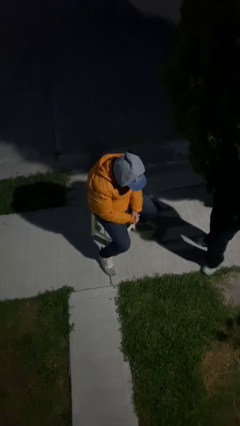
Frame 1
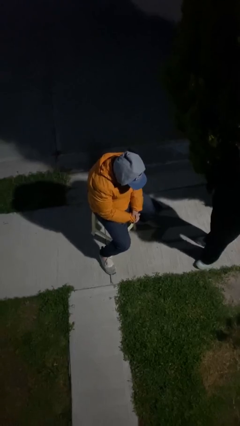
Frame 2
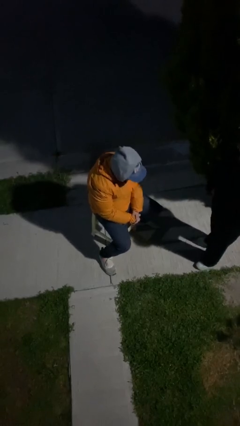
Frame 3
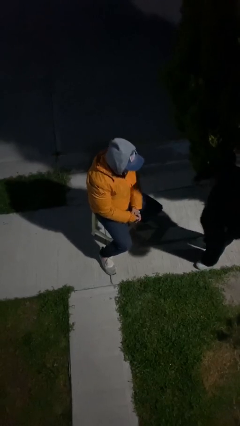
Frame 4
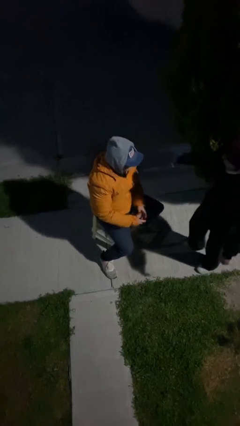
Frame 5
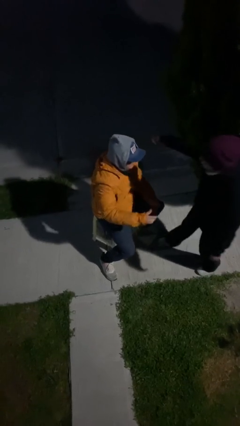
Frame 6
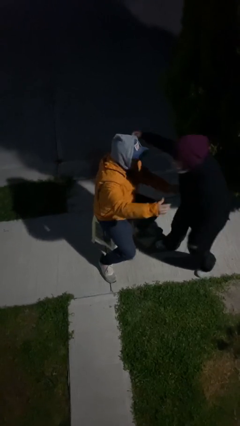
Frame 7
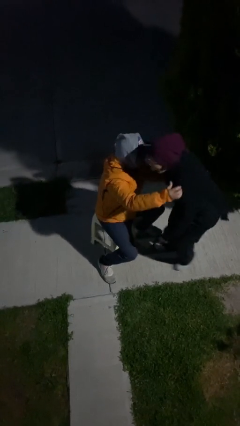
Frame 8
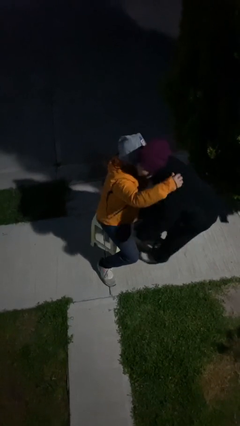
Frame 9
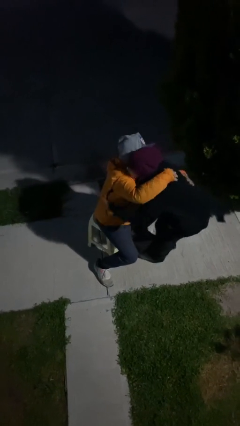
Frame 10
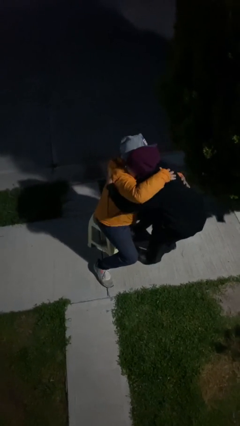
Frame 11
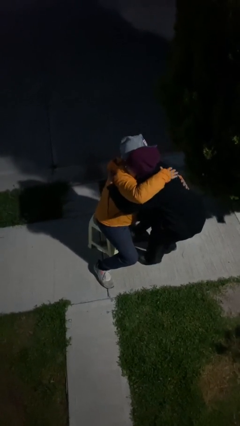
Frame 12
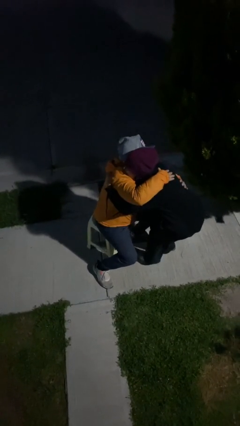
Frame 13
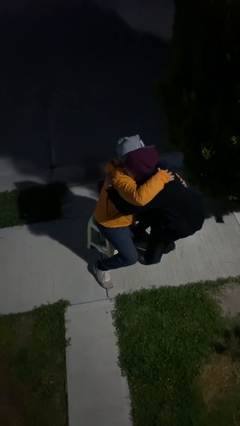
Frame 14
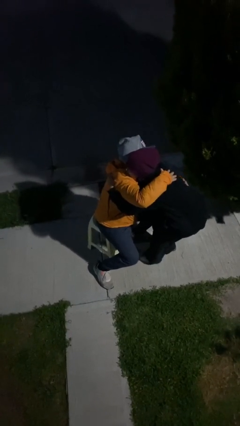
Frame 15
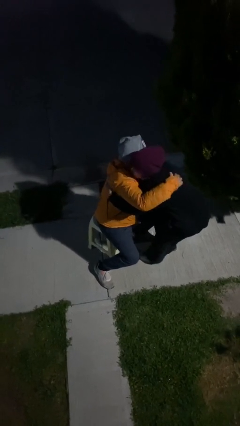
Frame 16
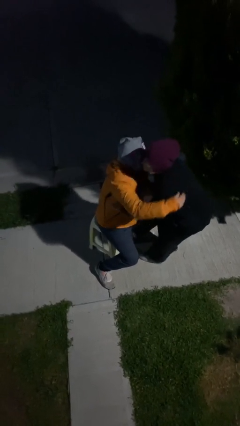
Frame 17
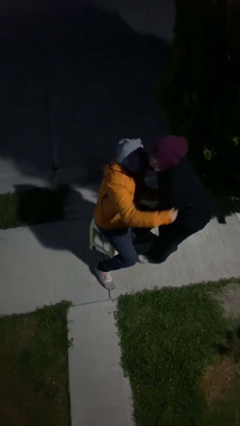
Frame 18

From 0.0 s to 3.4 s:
person embraces person

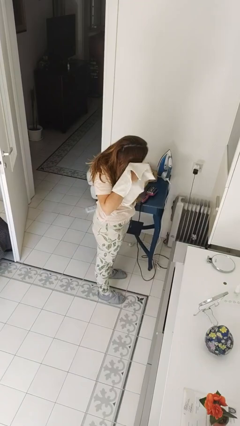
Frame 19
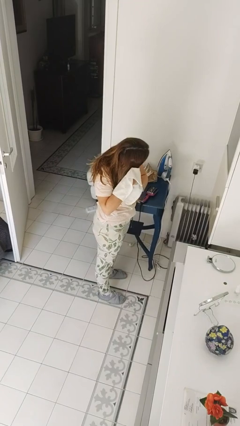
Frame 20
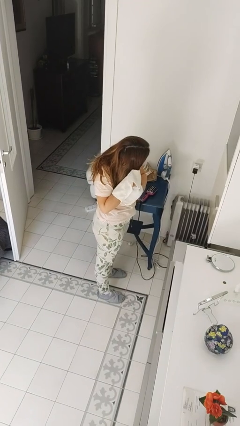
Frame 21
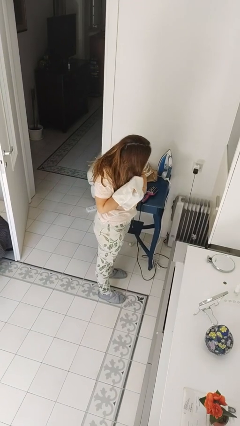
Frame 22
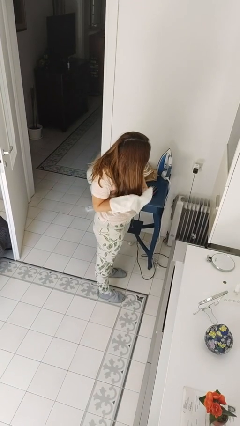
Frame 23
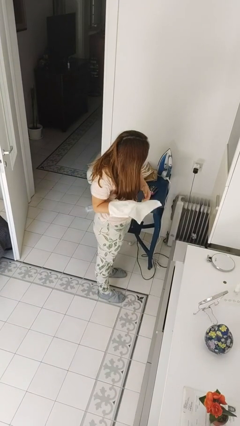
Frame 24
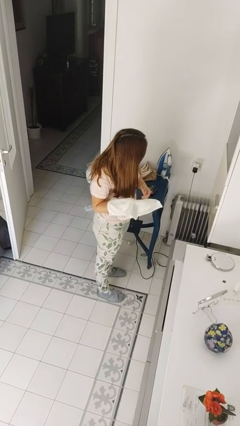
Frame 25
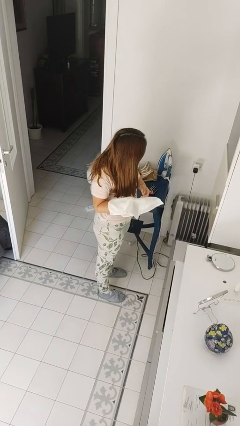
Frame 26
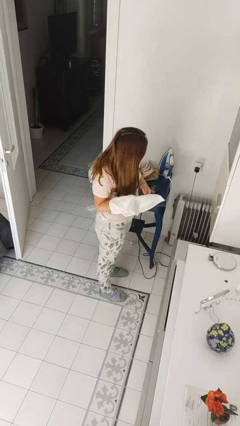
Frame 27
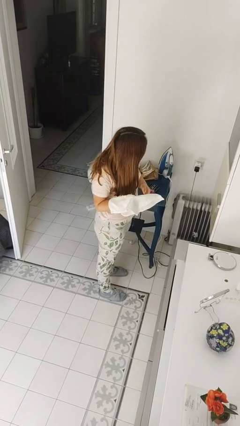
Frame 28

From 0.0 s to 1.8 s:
person dries hair with towel

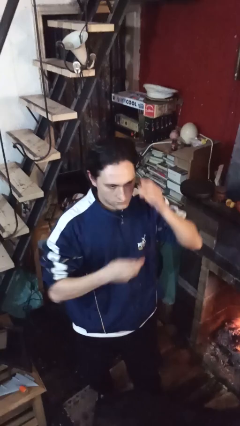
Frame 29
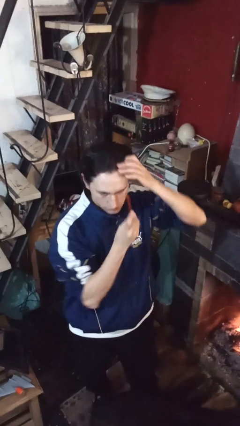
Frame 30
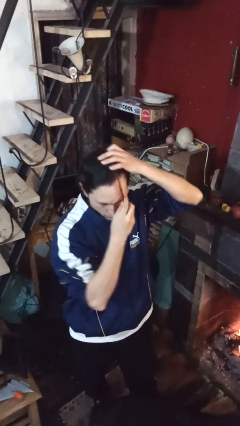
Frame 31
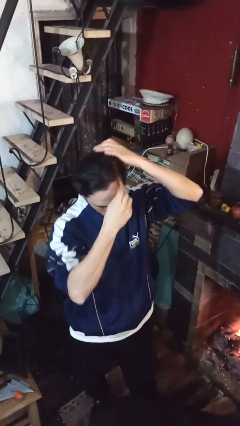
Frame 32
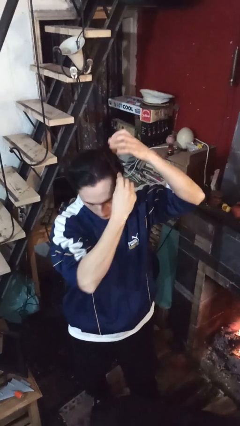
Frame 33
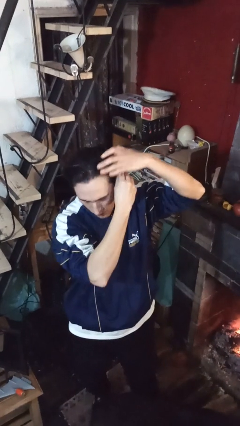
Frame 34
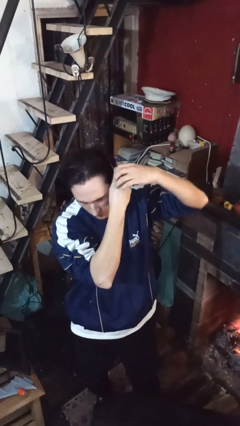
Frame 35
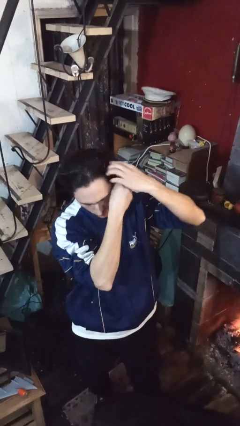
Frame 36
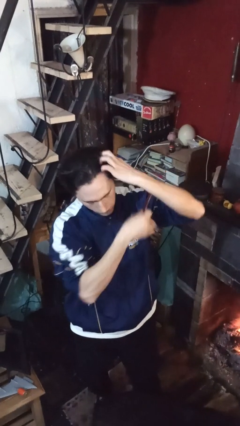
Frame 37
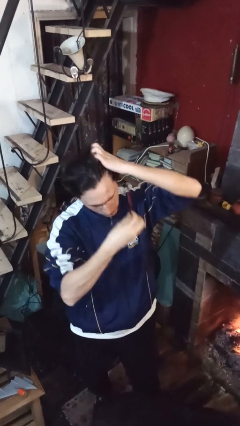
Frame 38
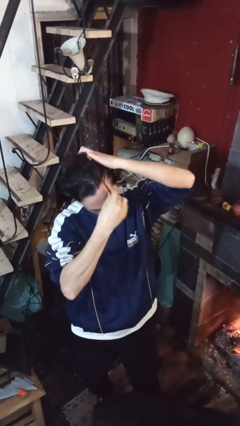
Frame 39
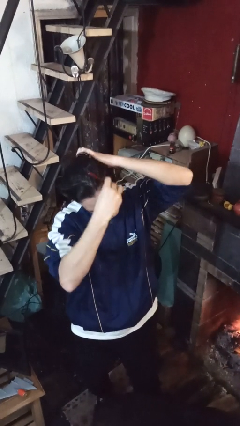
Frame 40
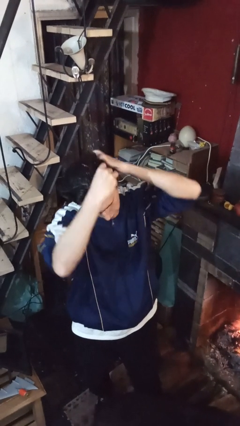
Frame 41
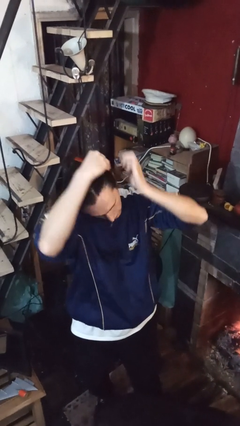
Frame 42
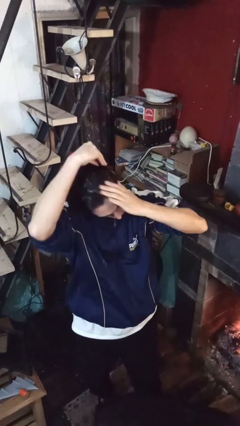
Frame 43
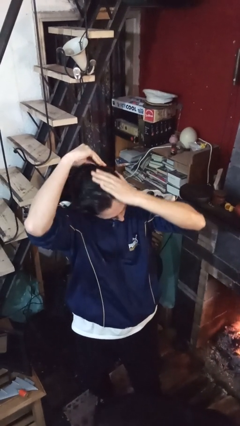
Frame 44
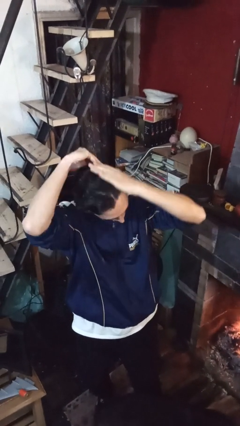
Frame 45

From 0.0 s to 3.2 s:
person brushes hair

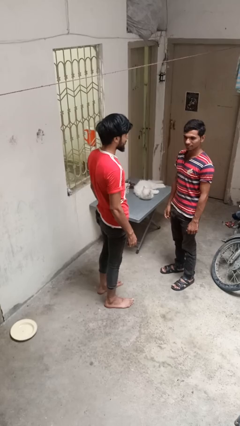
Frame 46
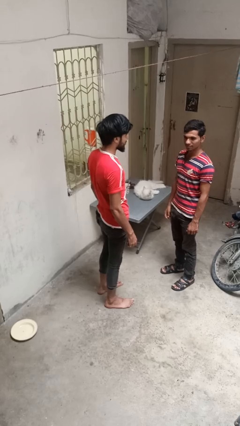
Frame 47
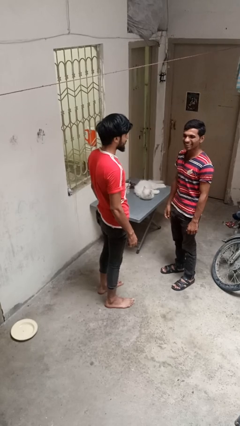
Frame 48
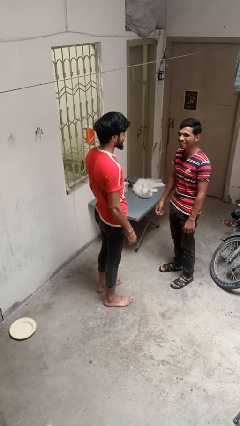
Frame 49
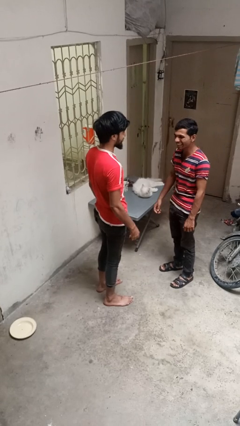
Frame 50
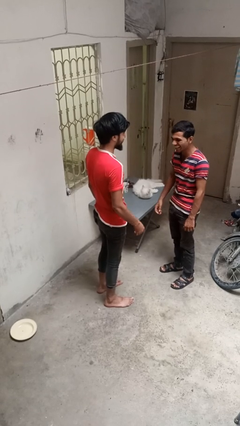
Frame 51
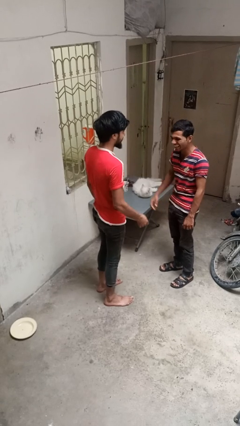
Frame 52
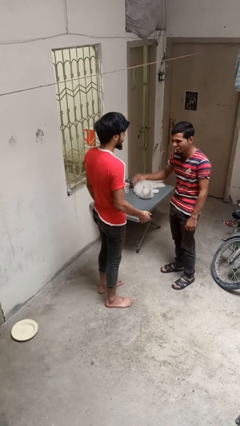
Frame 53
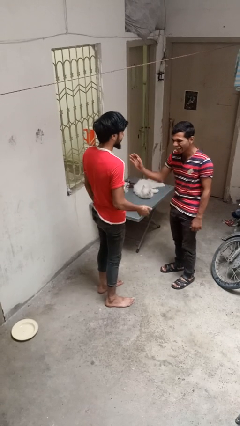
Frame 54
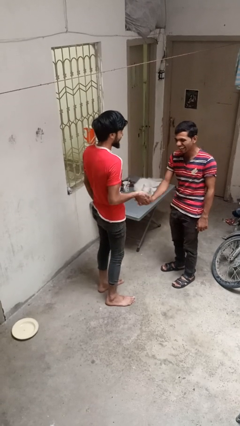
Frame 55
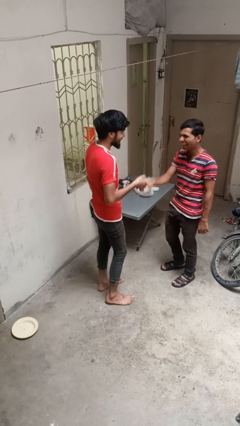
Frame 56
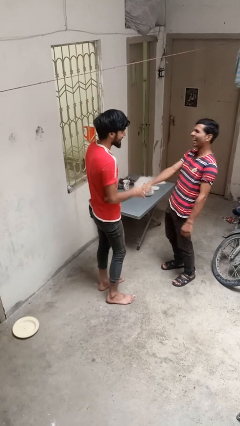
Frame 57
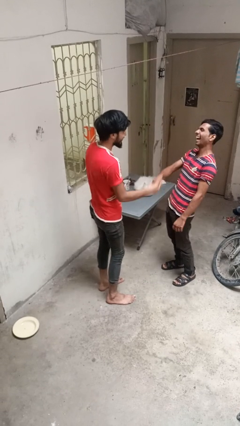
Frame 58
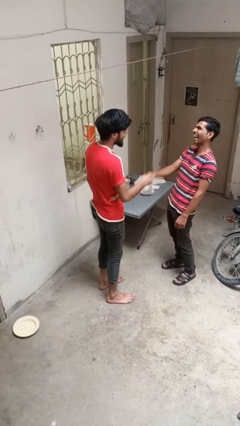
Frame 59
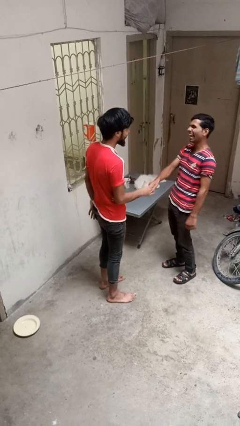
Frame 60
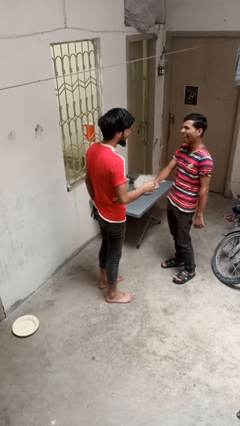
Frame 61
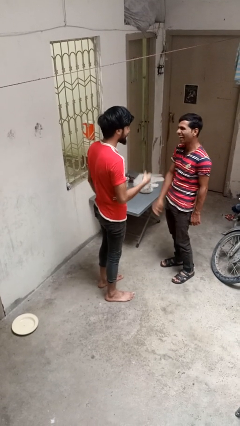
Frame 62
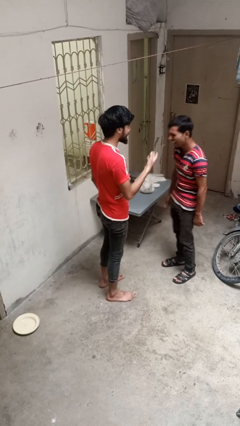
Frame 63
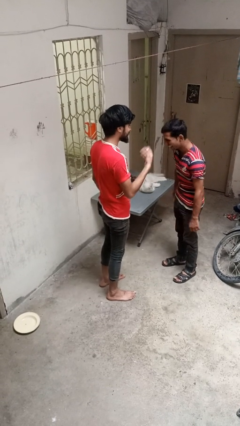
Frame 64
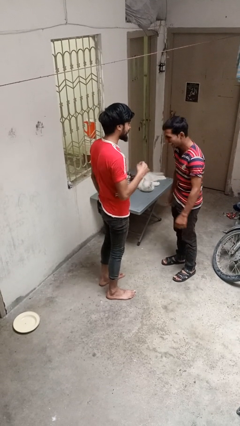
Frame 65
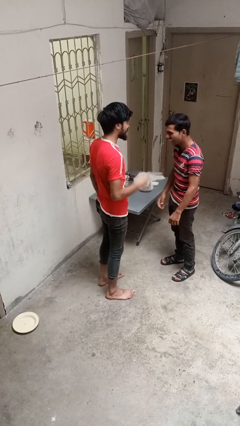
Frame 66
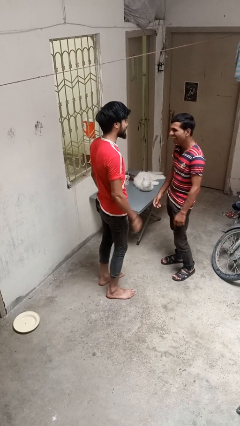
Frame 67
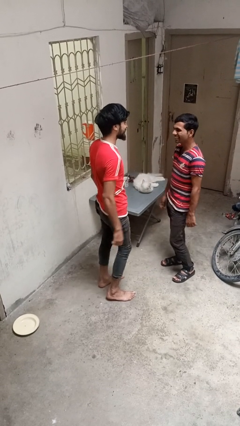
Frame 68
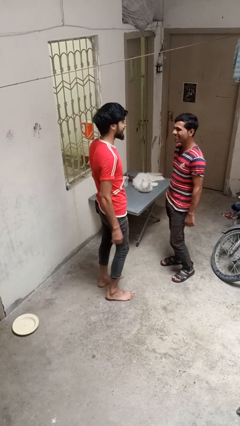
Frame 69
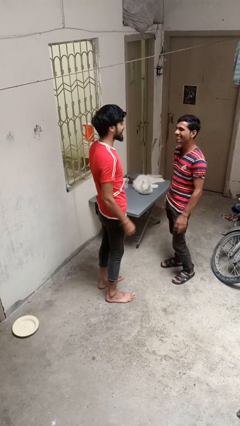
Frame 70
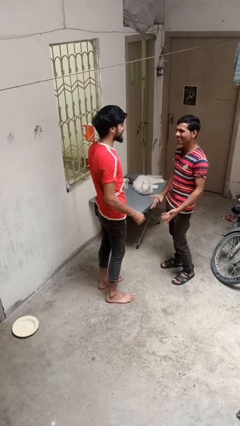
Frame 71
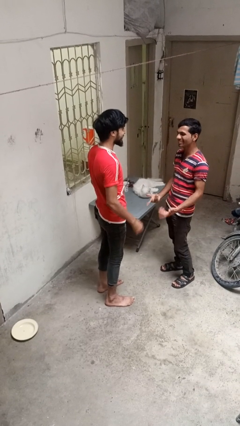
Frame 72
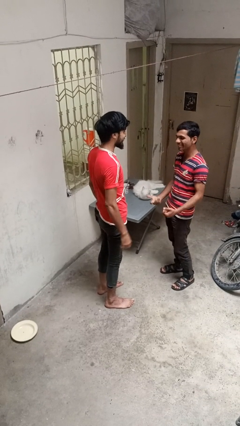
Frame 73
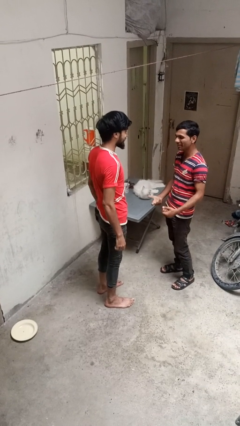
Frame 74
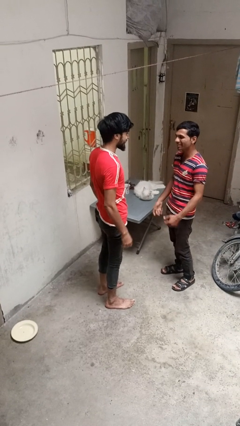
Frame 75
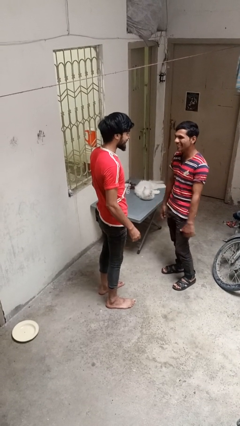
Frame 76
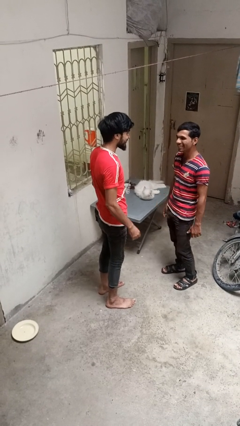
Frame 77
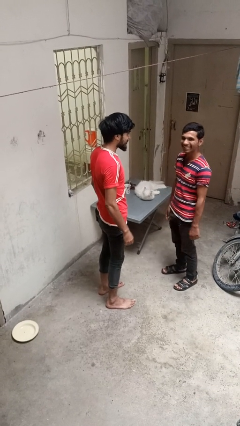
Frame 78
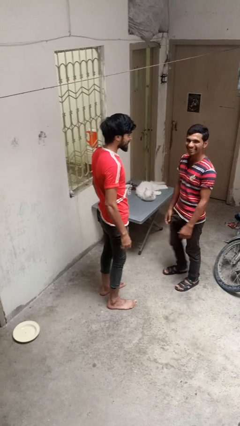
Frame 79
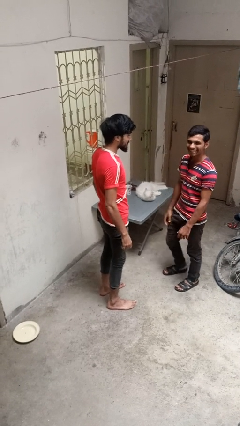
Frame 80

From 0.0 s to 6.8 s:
person laughs with person

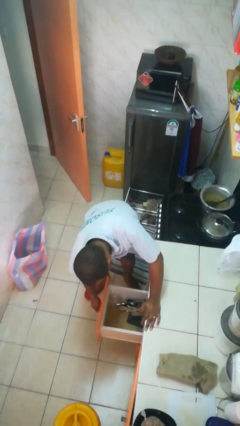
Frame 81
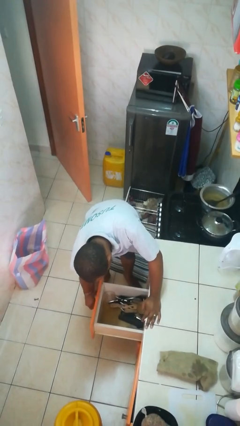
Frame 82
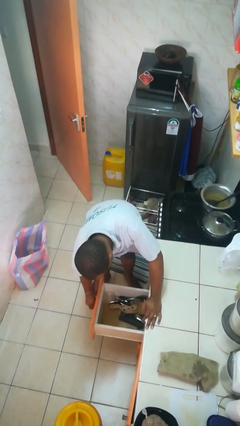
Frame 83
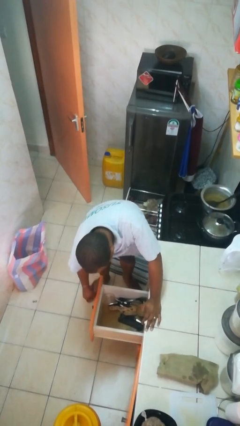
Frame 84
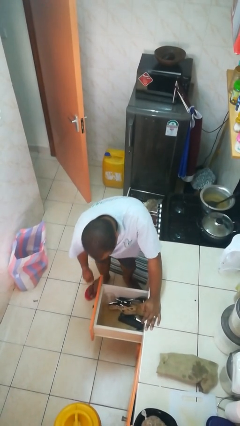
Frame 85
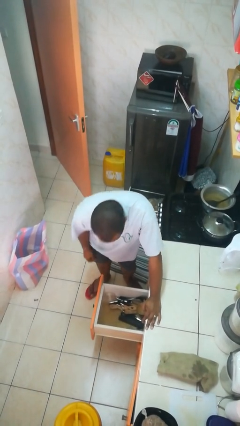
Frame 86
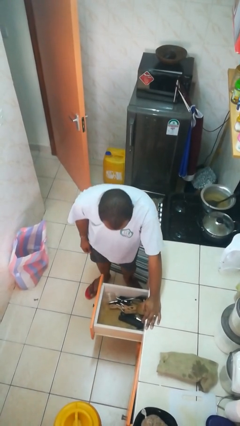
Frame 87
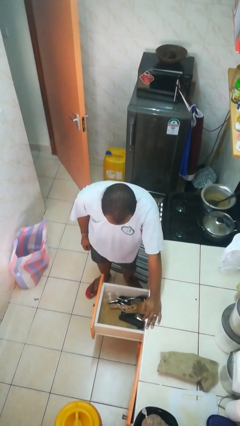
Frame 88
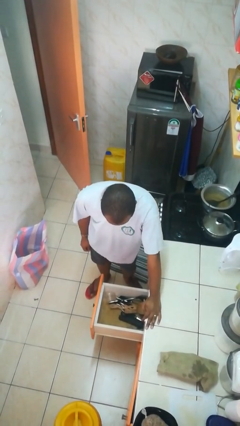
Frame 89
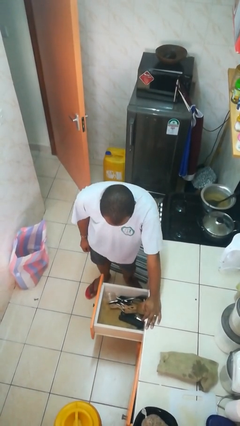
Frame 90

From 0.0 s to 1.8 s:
person opens kitchen drawer

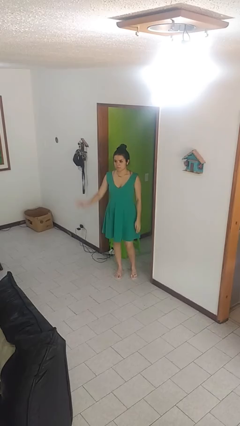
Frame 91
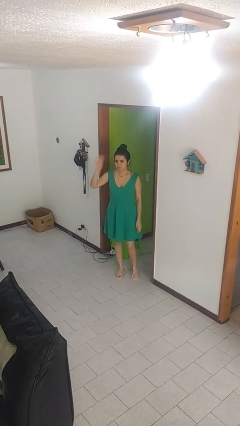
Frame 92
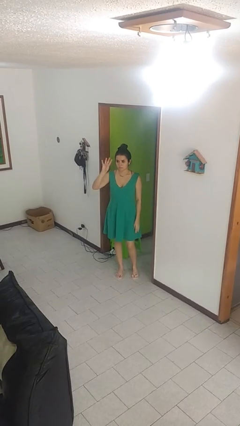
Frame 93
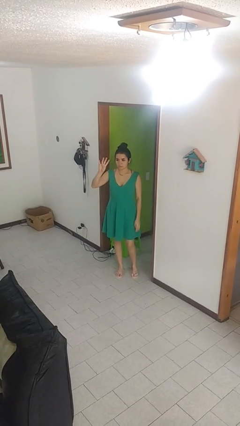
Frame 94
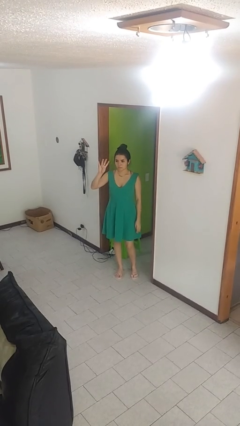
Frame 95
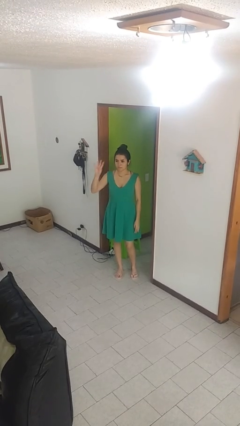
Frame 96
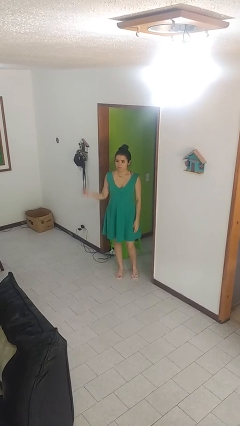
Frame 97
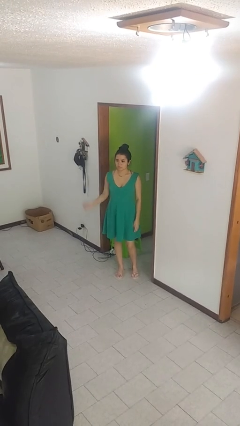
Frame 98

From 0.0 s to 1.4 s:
person gestures number four
